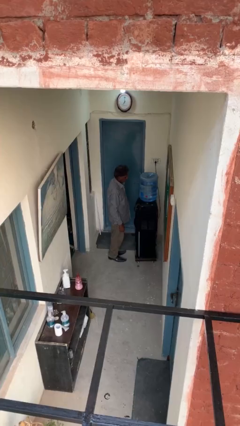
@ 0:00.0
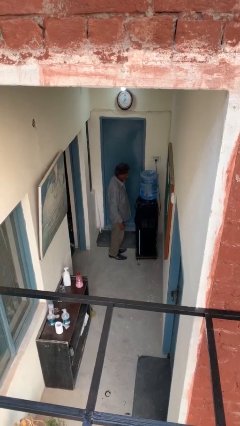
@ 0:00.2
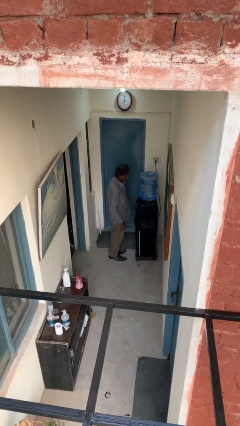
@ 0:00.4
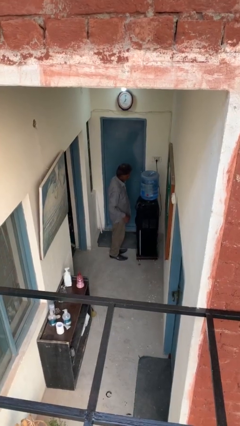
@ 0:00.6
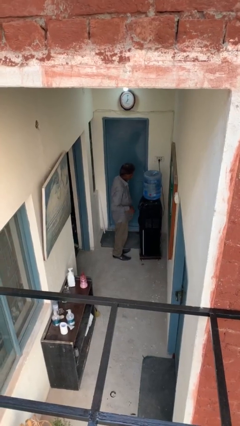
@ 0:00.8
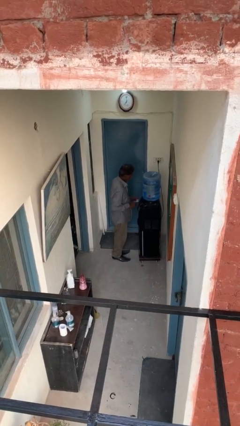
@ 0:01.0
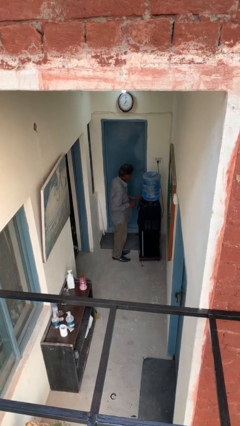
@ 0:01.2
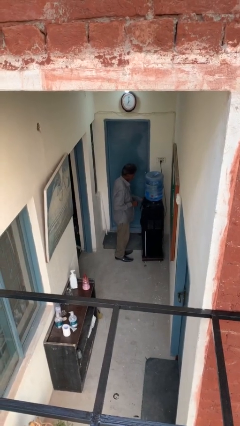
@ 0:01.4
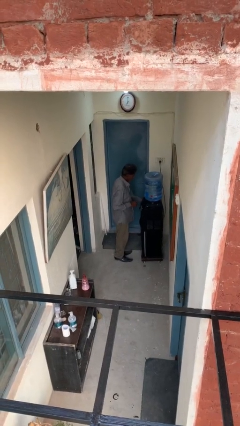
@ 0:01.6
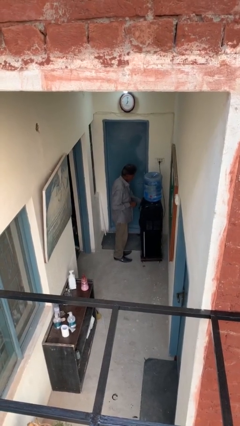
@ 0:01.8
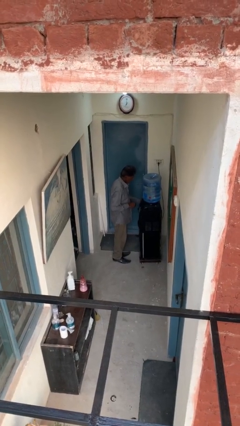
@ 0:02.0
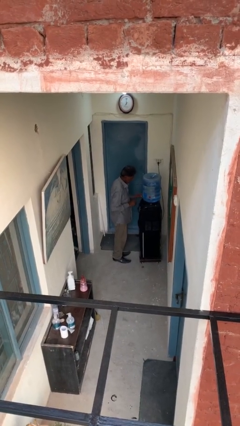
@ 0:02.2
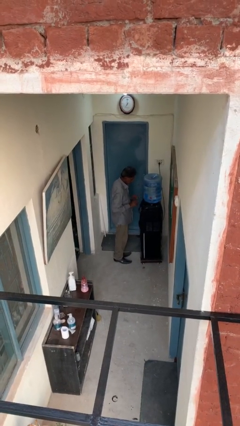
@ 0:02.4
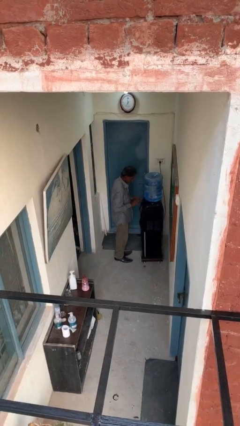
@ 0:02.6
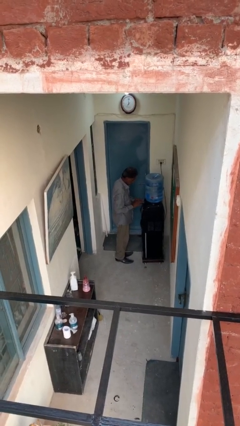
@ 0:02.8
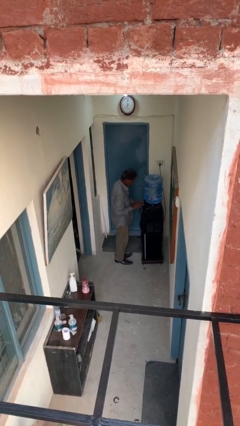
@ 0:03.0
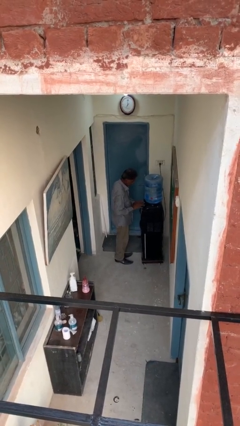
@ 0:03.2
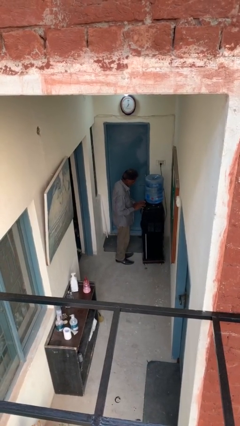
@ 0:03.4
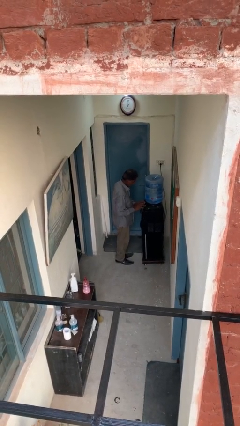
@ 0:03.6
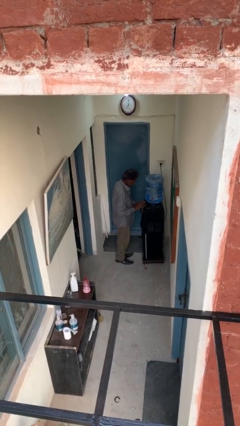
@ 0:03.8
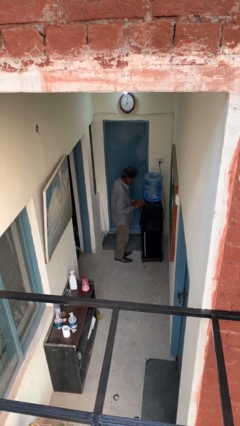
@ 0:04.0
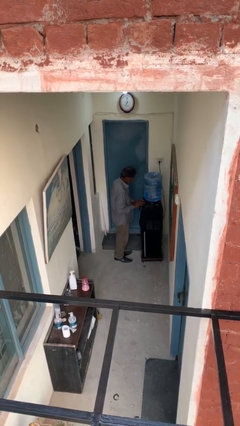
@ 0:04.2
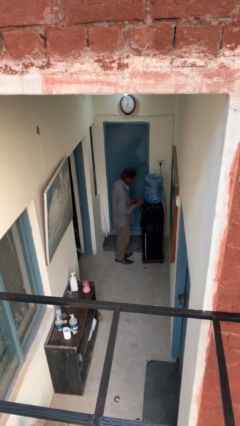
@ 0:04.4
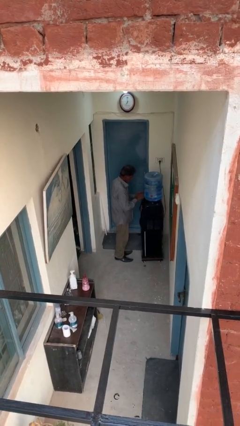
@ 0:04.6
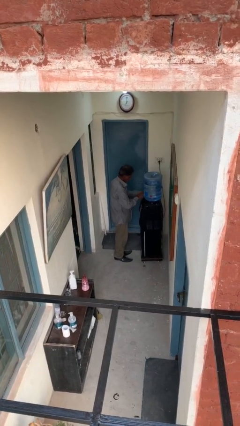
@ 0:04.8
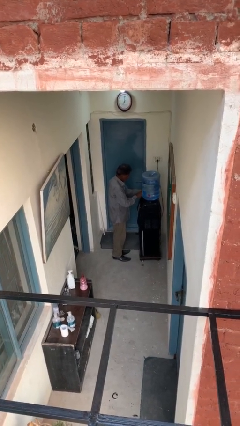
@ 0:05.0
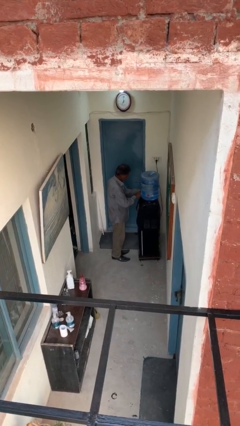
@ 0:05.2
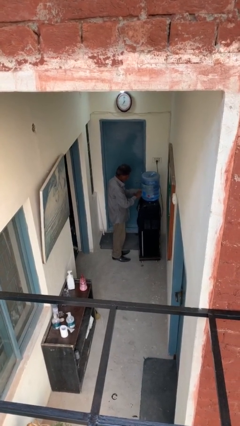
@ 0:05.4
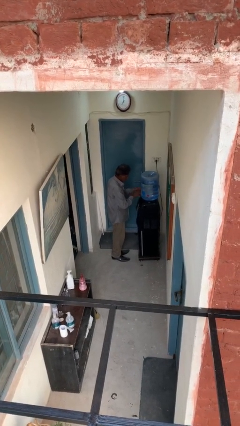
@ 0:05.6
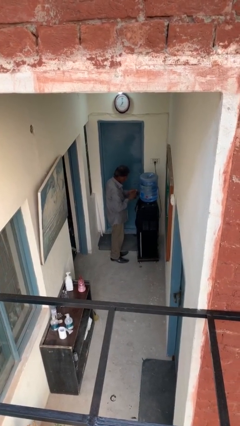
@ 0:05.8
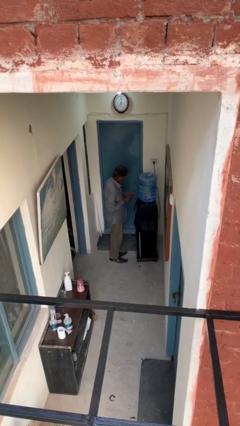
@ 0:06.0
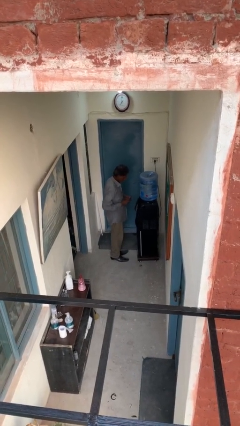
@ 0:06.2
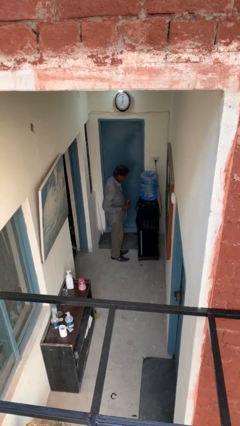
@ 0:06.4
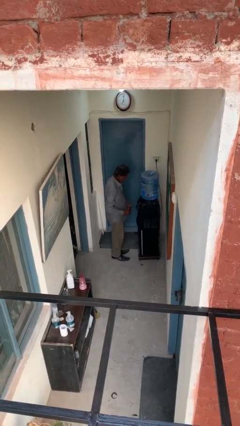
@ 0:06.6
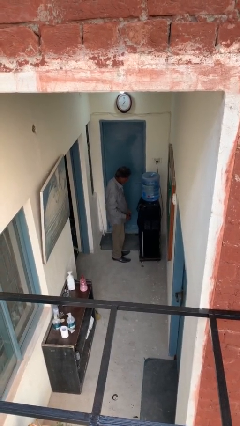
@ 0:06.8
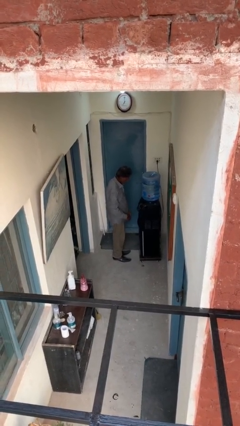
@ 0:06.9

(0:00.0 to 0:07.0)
person purchases from machine

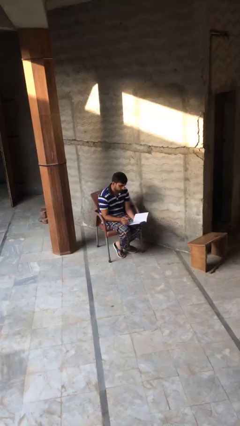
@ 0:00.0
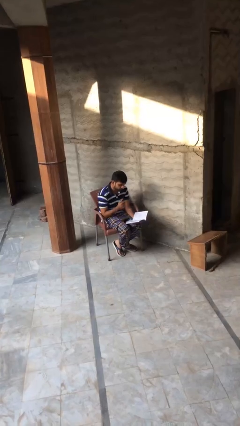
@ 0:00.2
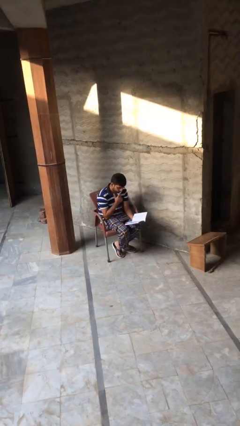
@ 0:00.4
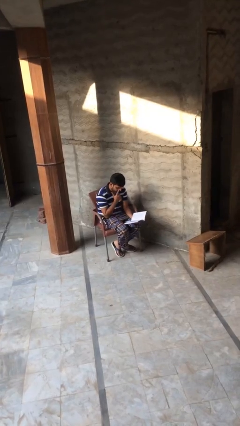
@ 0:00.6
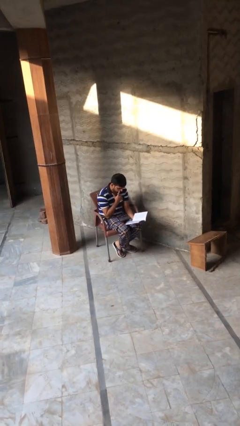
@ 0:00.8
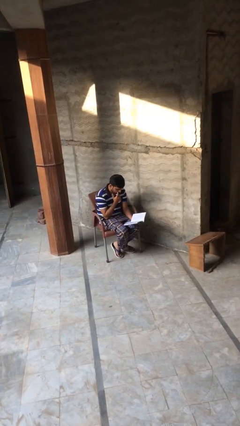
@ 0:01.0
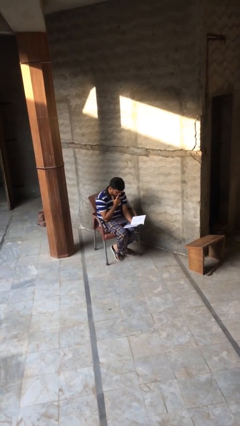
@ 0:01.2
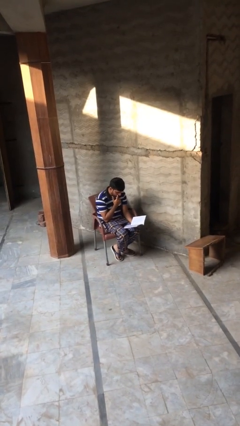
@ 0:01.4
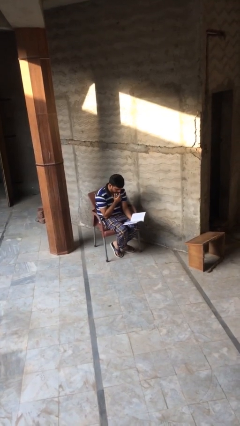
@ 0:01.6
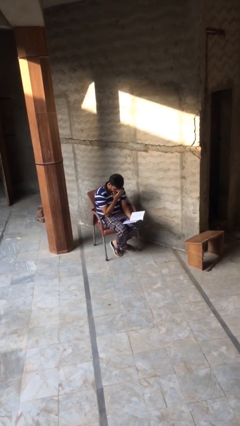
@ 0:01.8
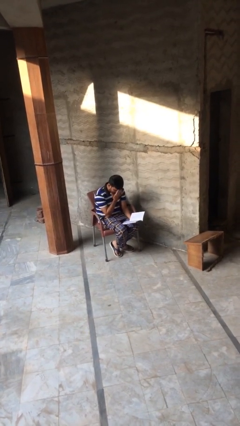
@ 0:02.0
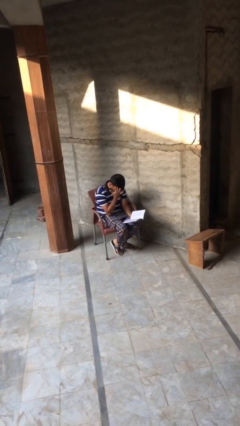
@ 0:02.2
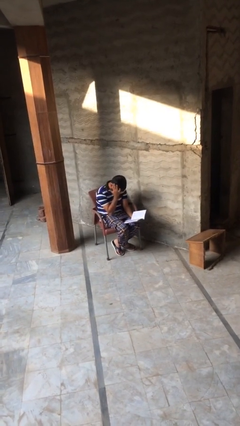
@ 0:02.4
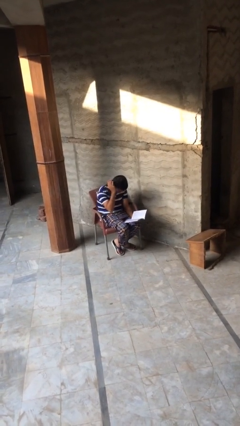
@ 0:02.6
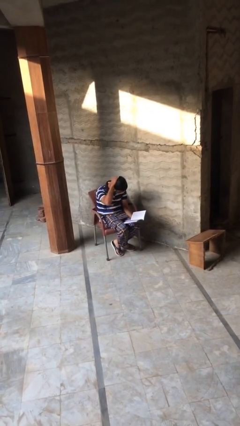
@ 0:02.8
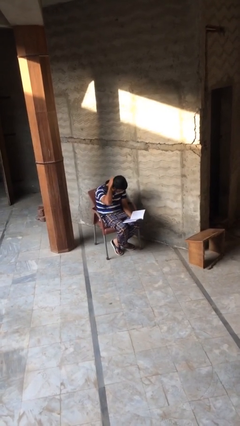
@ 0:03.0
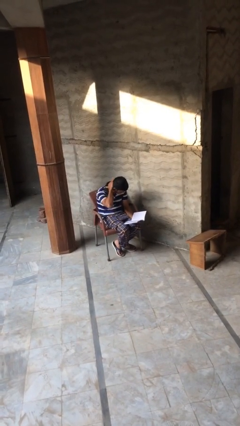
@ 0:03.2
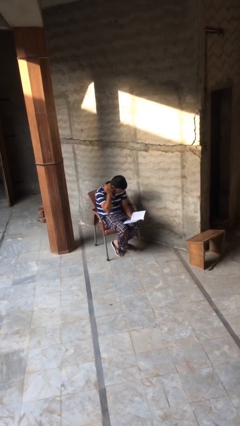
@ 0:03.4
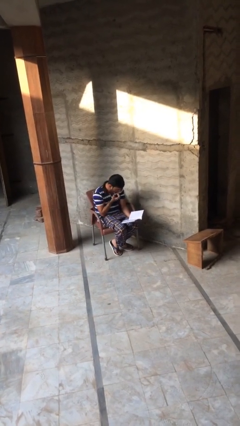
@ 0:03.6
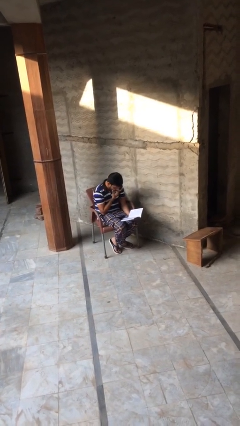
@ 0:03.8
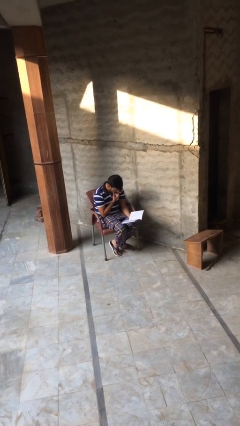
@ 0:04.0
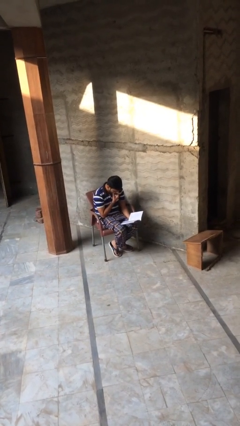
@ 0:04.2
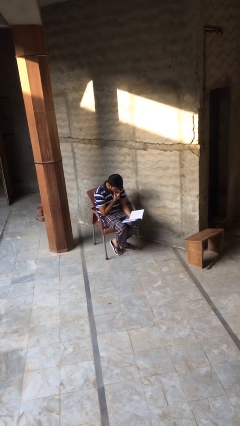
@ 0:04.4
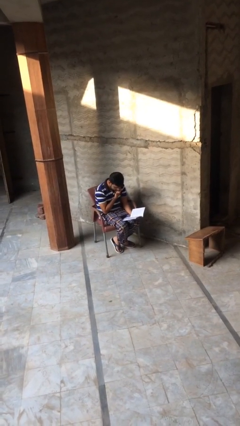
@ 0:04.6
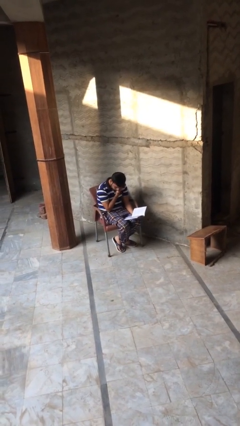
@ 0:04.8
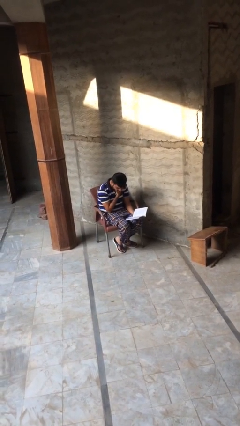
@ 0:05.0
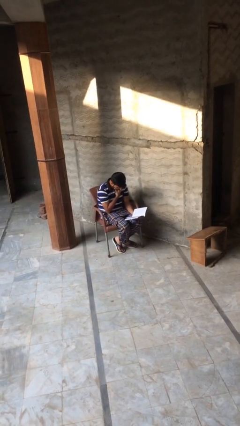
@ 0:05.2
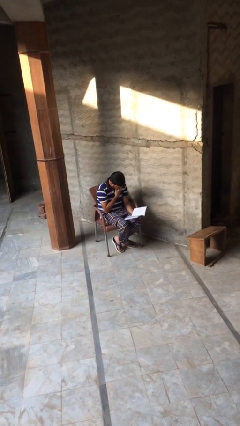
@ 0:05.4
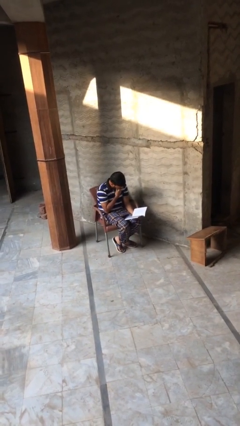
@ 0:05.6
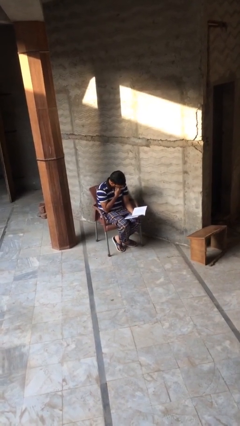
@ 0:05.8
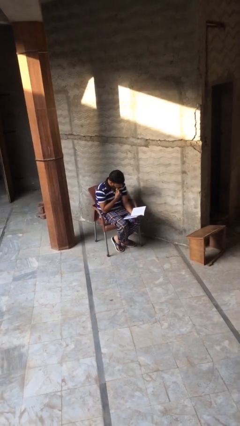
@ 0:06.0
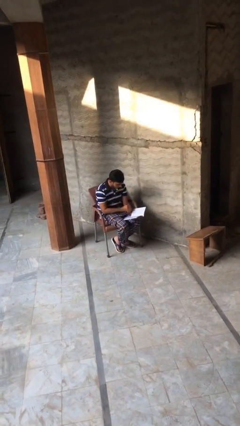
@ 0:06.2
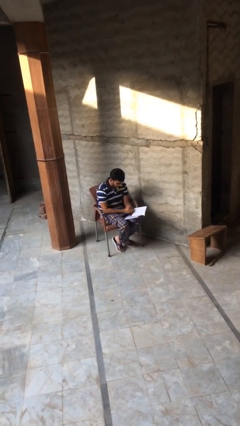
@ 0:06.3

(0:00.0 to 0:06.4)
person reads document

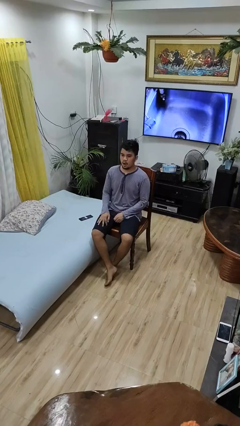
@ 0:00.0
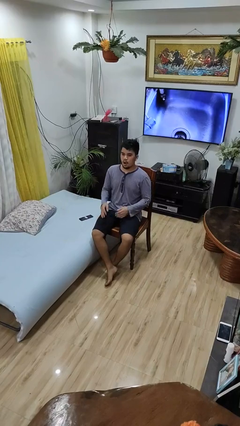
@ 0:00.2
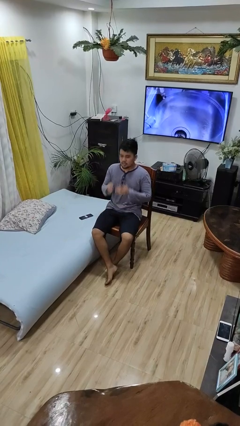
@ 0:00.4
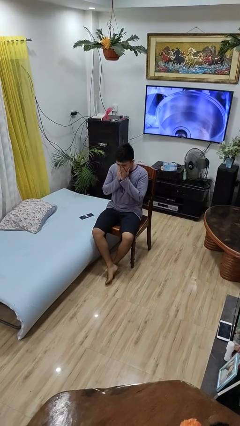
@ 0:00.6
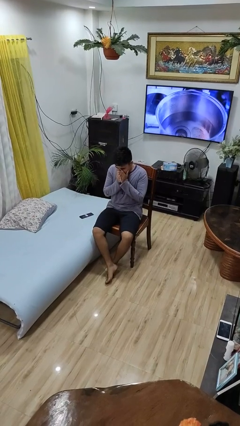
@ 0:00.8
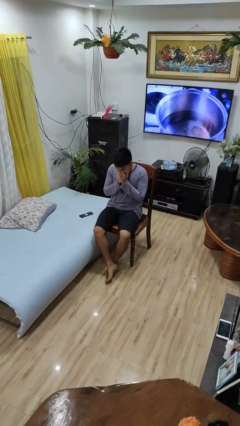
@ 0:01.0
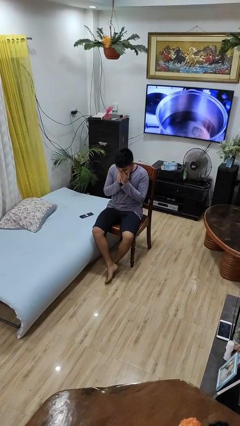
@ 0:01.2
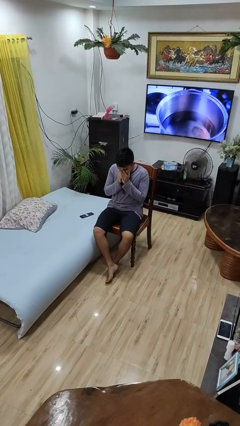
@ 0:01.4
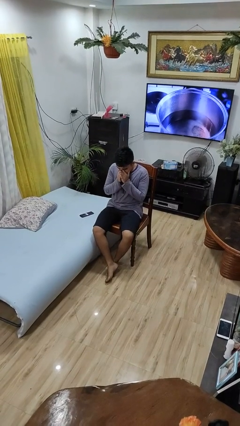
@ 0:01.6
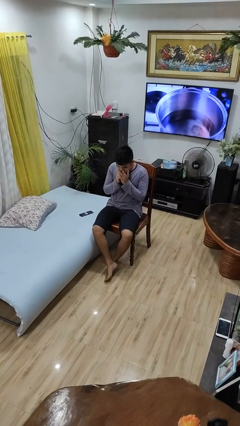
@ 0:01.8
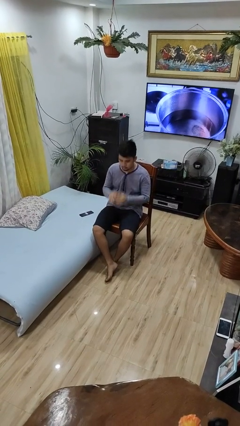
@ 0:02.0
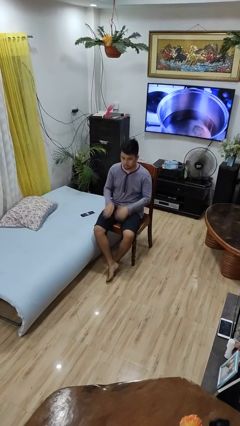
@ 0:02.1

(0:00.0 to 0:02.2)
person sneezes into hand

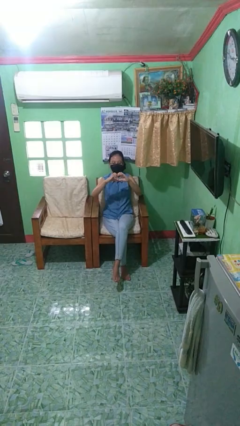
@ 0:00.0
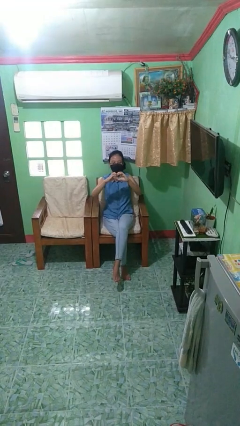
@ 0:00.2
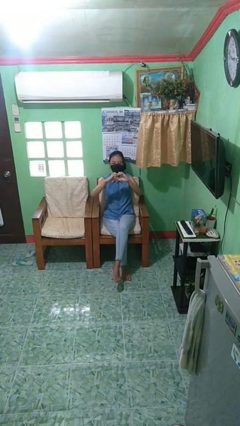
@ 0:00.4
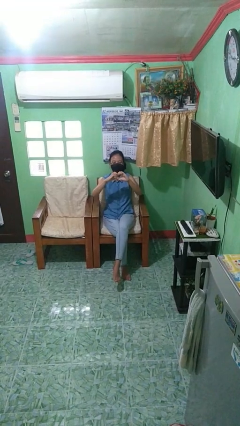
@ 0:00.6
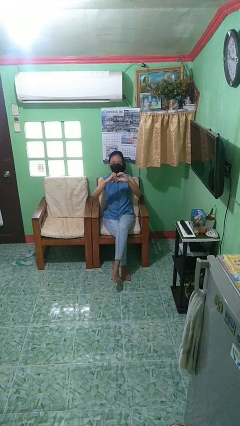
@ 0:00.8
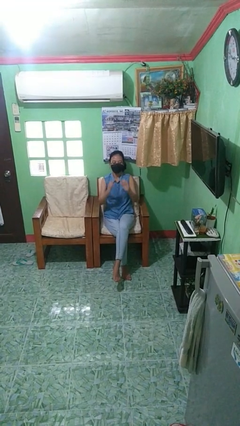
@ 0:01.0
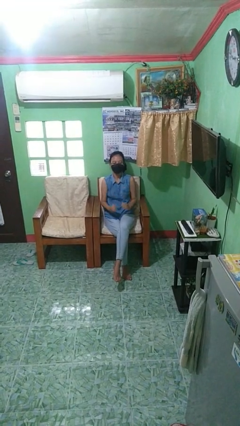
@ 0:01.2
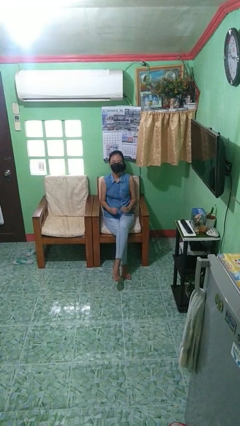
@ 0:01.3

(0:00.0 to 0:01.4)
person gestures heart

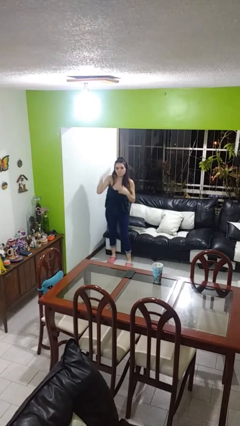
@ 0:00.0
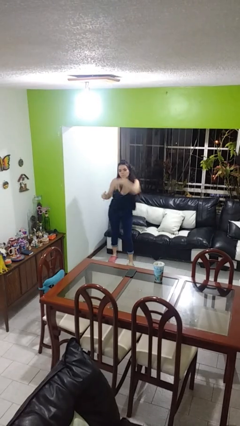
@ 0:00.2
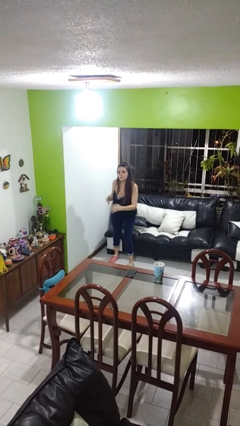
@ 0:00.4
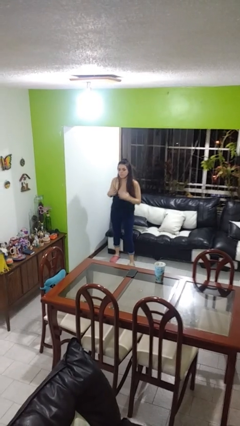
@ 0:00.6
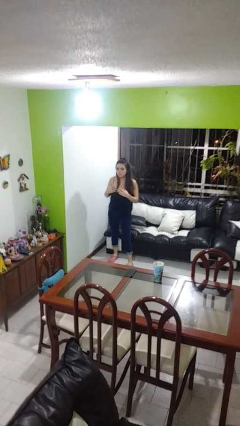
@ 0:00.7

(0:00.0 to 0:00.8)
person karate chop
